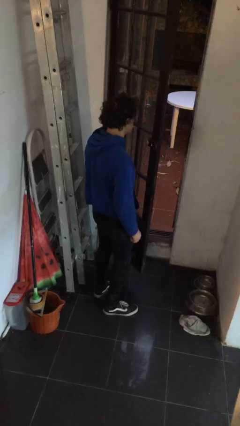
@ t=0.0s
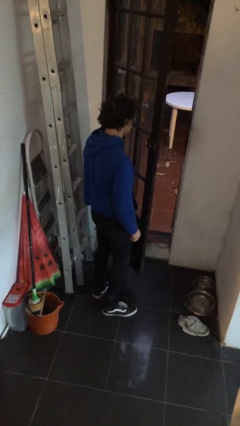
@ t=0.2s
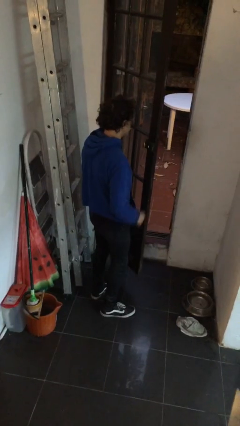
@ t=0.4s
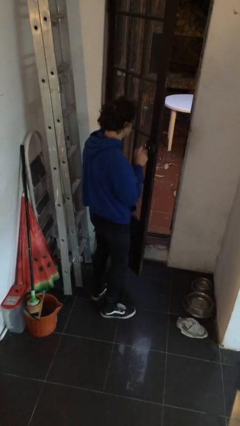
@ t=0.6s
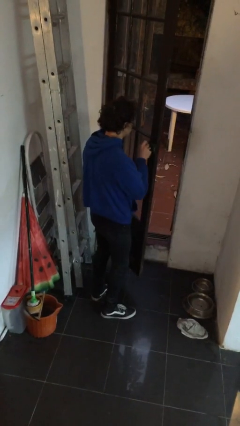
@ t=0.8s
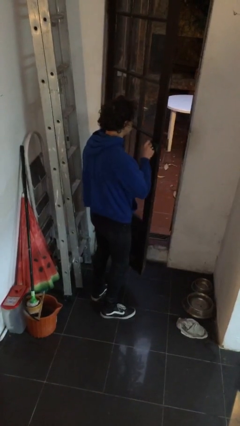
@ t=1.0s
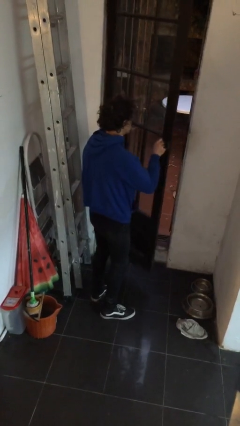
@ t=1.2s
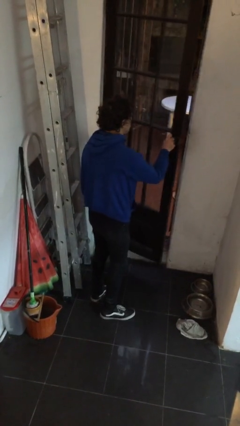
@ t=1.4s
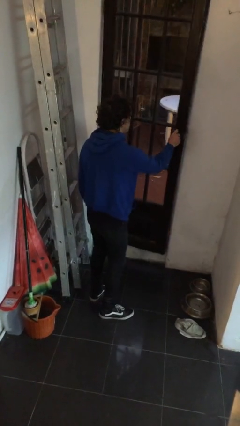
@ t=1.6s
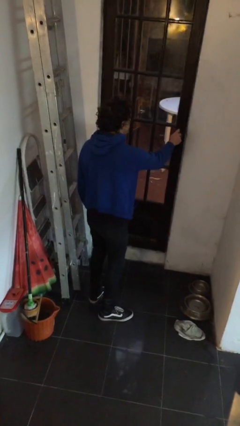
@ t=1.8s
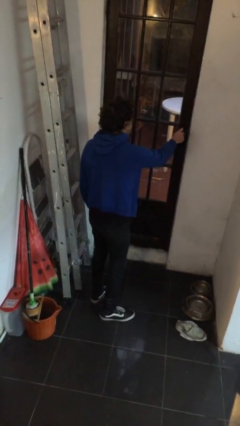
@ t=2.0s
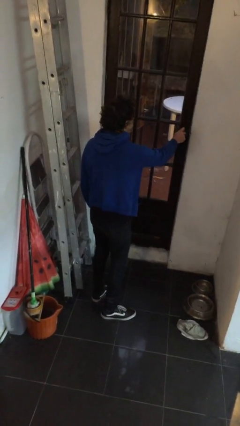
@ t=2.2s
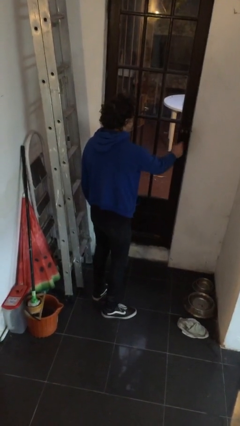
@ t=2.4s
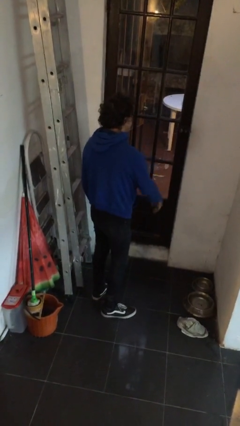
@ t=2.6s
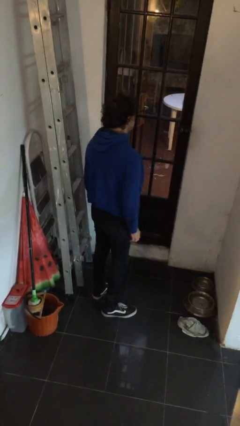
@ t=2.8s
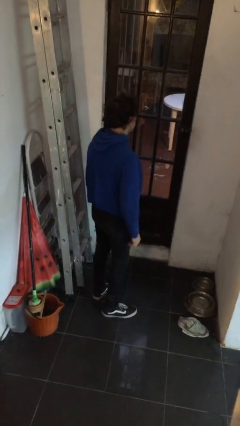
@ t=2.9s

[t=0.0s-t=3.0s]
person closes facility door

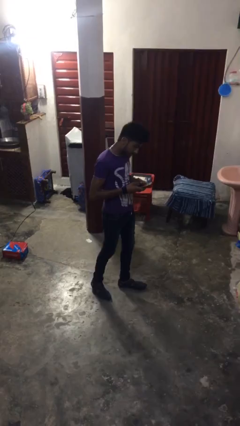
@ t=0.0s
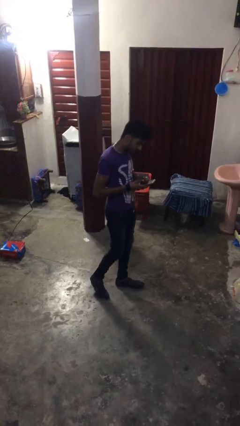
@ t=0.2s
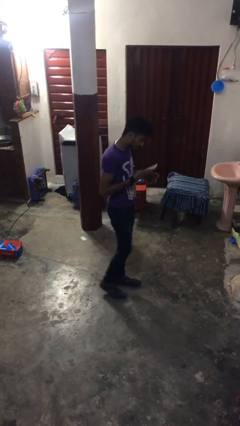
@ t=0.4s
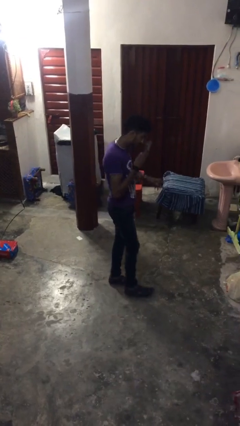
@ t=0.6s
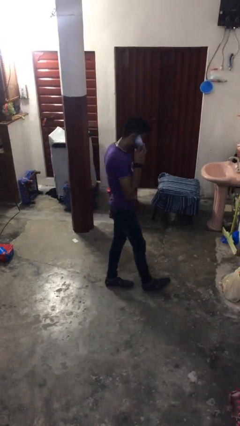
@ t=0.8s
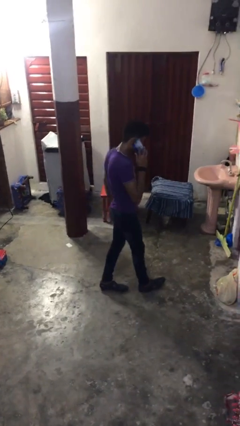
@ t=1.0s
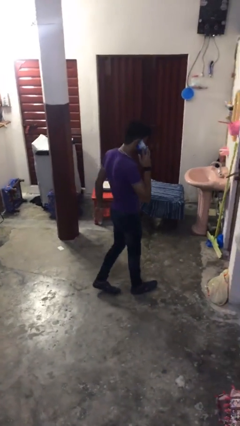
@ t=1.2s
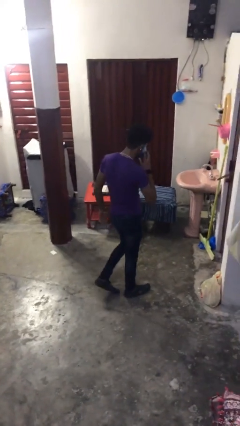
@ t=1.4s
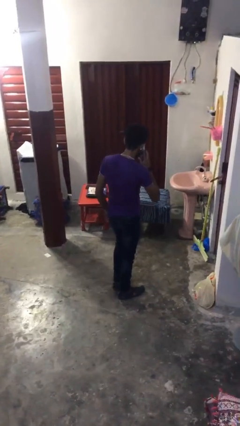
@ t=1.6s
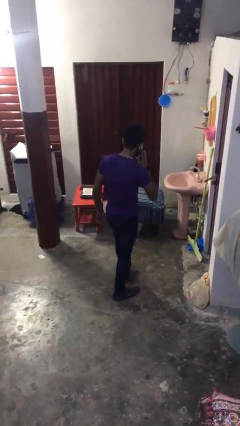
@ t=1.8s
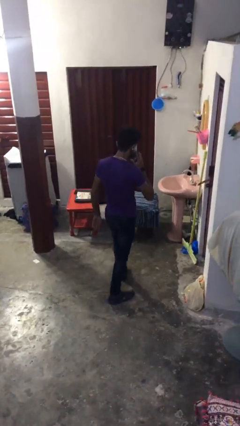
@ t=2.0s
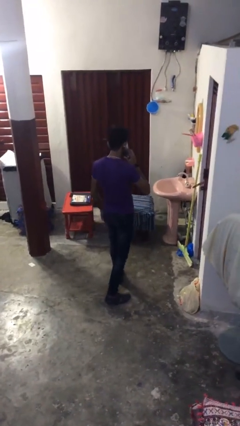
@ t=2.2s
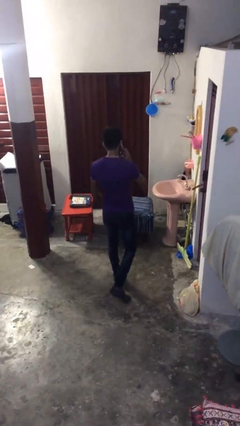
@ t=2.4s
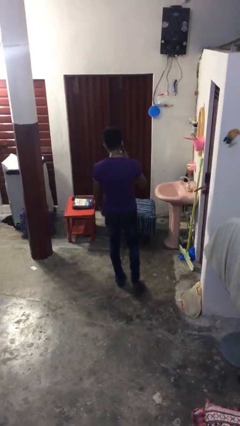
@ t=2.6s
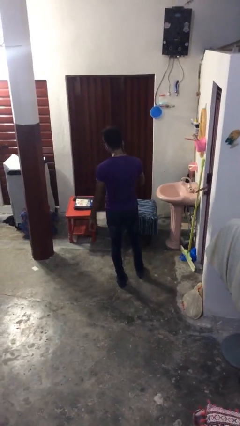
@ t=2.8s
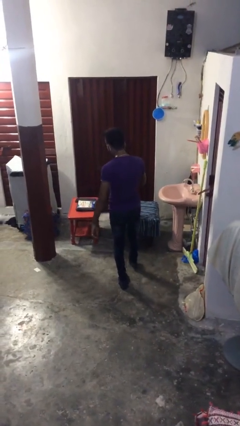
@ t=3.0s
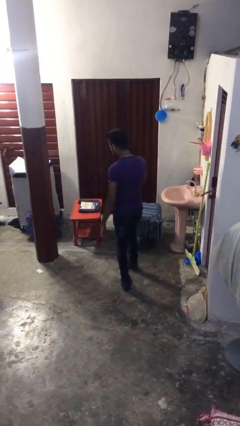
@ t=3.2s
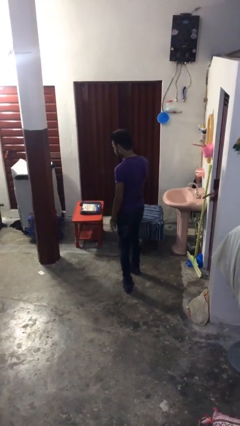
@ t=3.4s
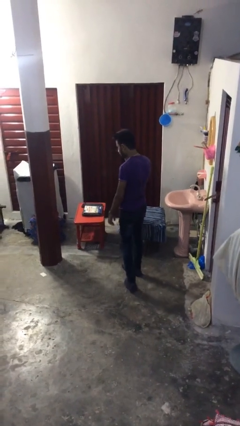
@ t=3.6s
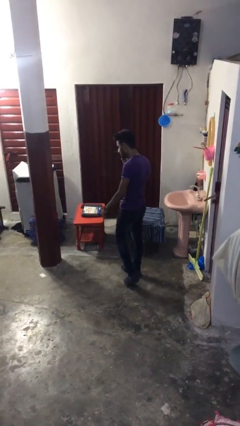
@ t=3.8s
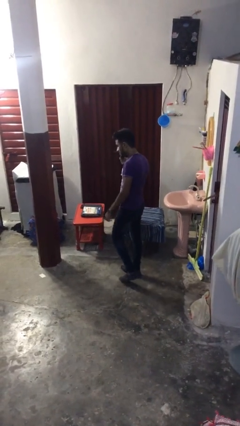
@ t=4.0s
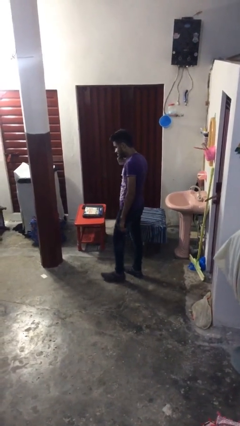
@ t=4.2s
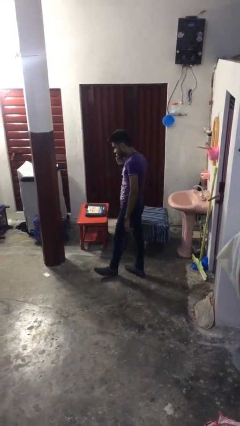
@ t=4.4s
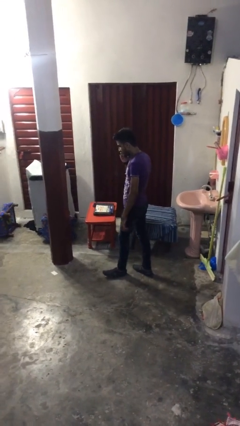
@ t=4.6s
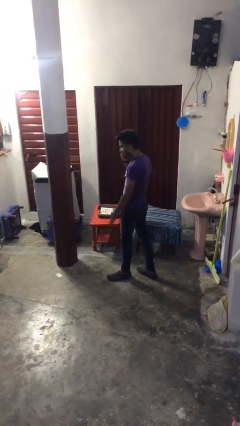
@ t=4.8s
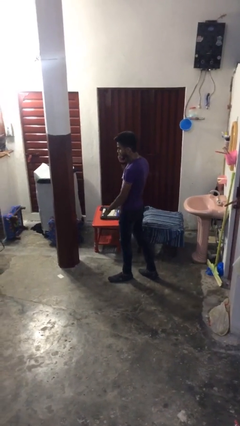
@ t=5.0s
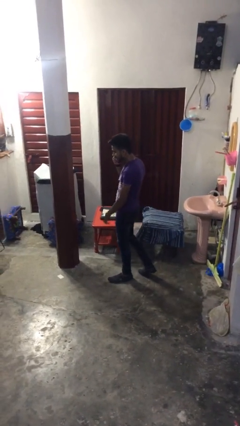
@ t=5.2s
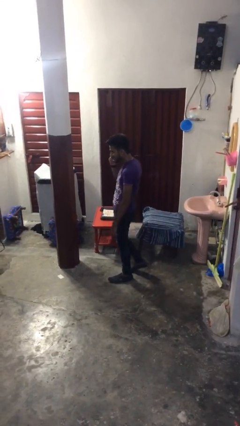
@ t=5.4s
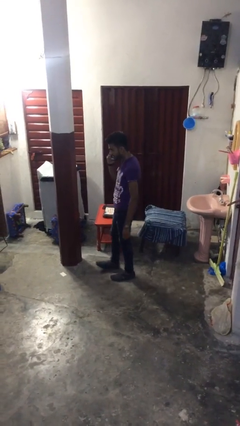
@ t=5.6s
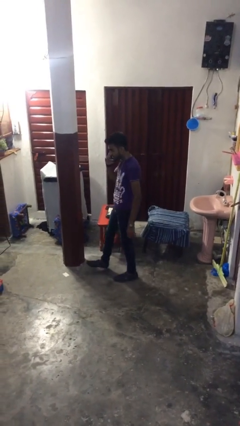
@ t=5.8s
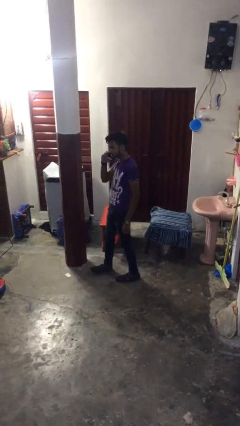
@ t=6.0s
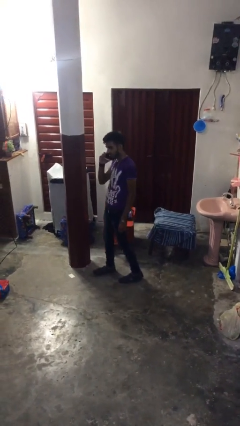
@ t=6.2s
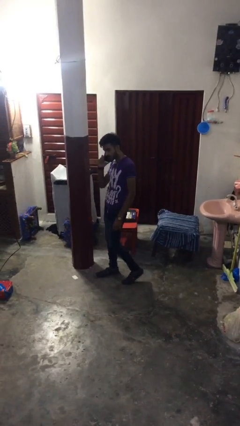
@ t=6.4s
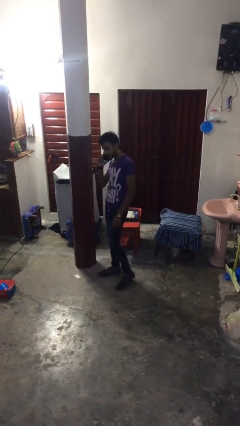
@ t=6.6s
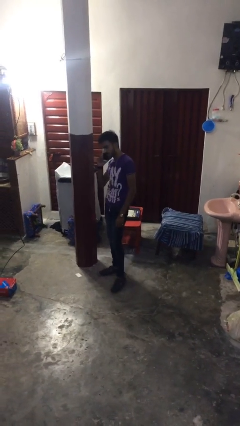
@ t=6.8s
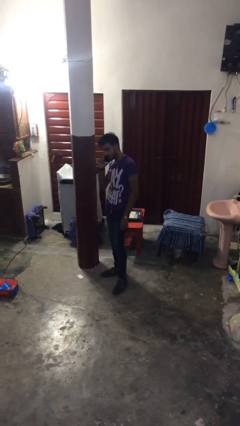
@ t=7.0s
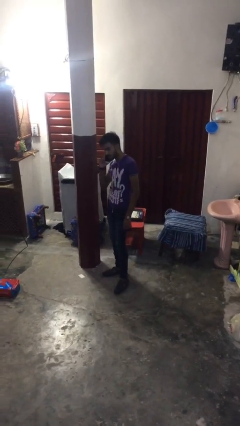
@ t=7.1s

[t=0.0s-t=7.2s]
person talks on phone

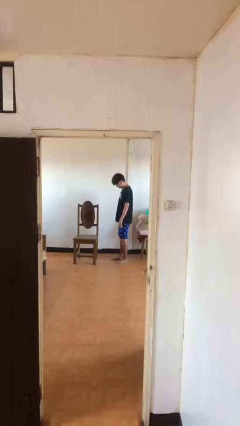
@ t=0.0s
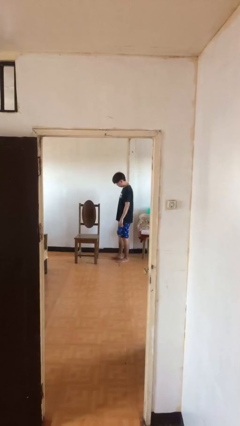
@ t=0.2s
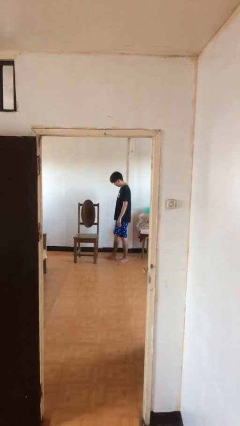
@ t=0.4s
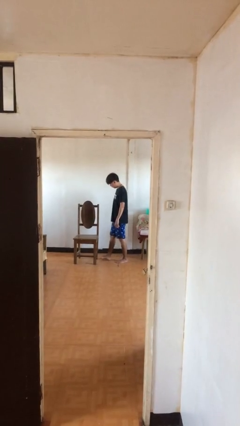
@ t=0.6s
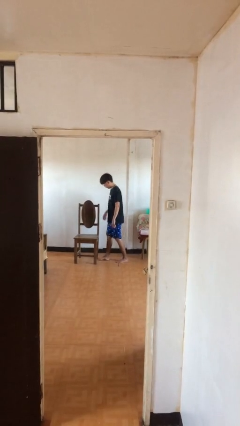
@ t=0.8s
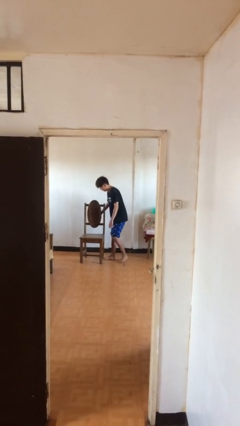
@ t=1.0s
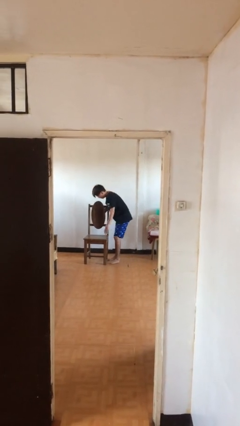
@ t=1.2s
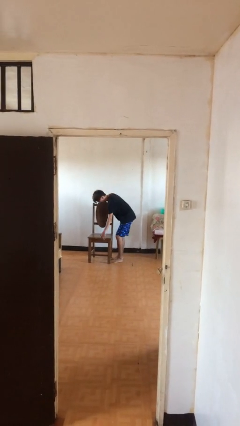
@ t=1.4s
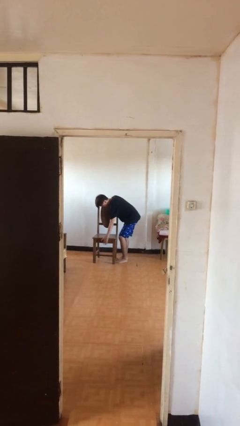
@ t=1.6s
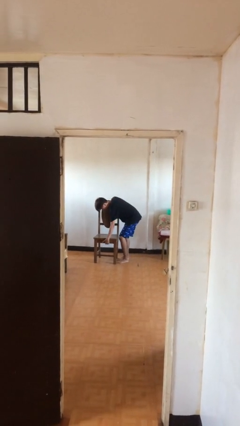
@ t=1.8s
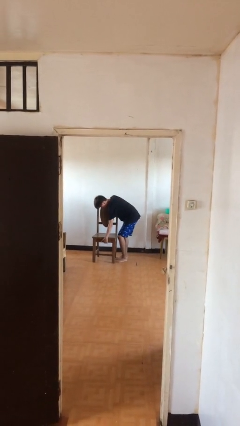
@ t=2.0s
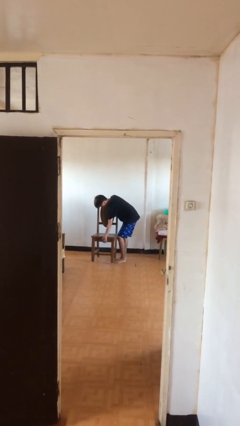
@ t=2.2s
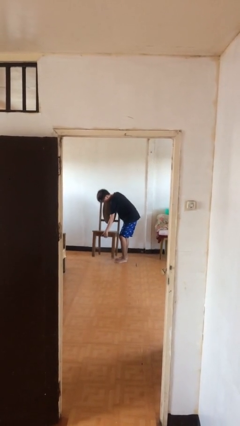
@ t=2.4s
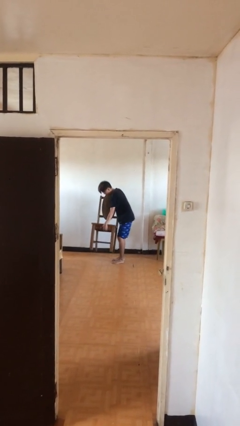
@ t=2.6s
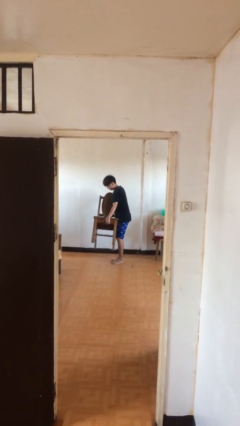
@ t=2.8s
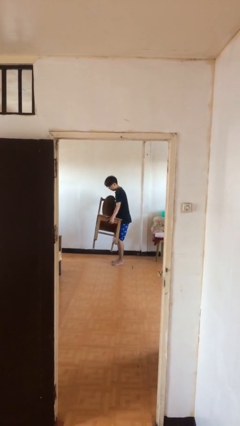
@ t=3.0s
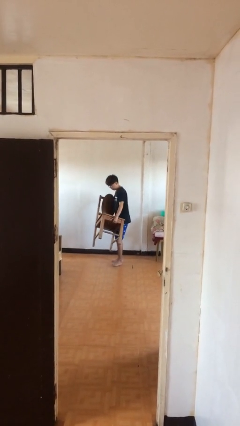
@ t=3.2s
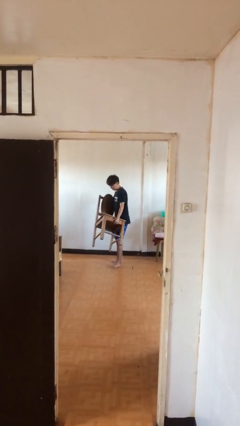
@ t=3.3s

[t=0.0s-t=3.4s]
person picks up object from floor

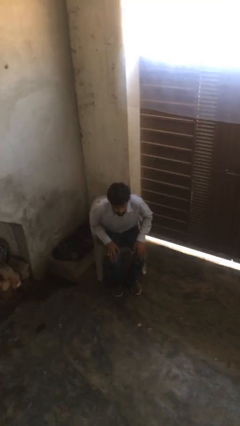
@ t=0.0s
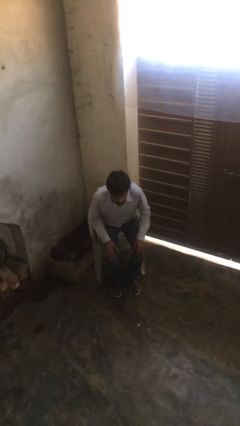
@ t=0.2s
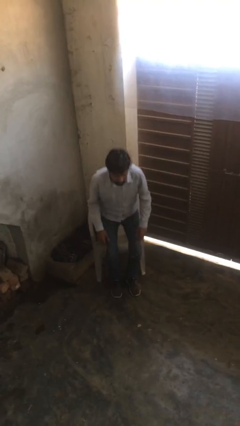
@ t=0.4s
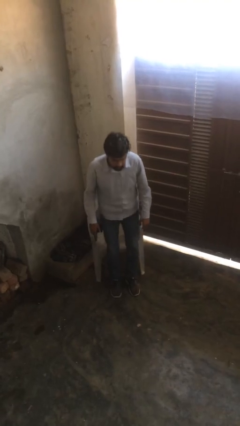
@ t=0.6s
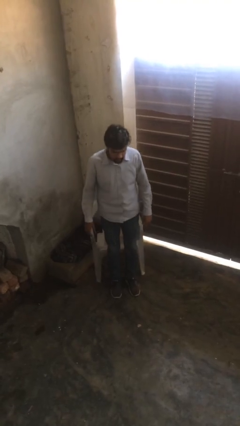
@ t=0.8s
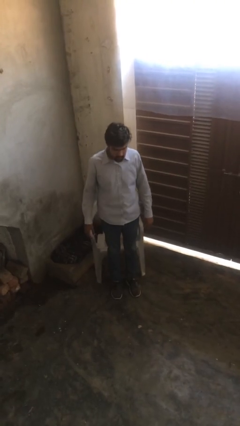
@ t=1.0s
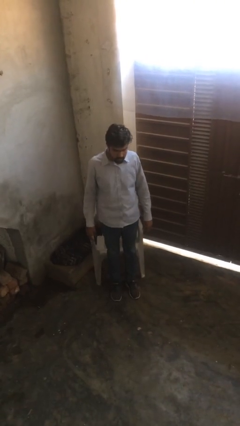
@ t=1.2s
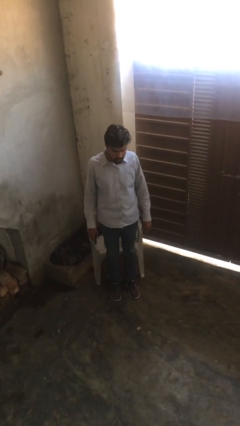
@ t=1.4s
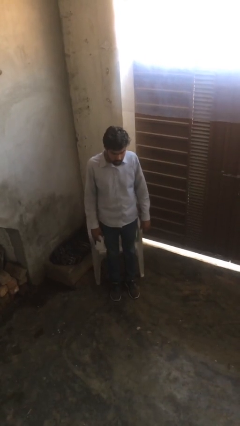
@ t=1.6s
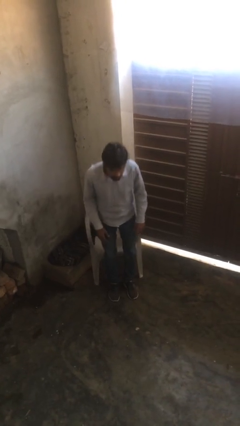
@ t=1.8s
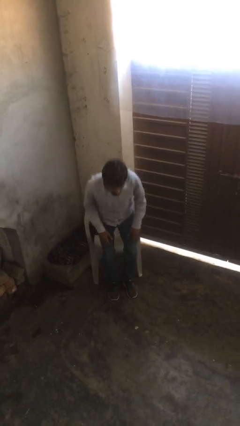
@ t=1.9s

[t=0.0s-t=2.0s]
person stands up

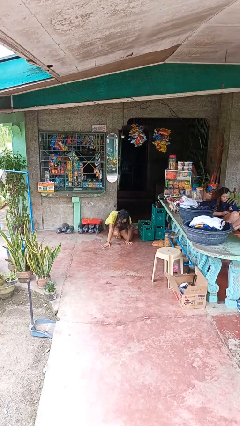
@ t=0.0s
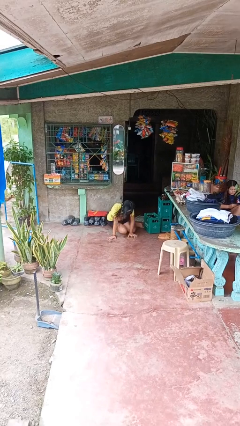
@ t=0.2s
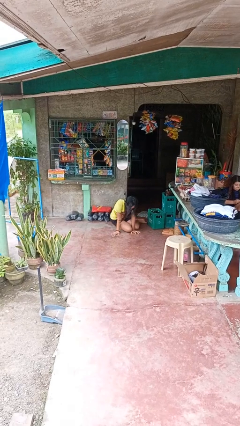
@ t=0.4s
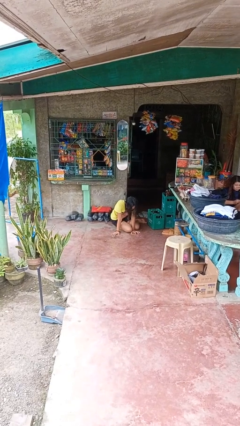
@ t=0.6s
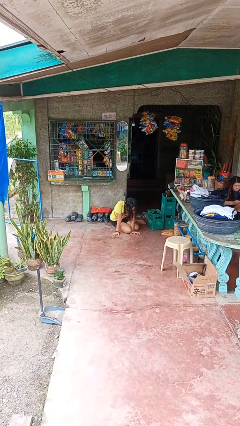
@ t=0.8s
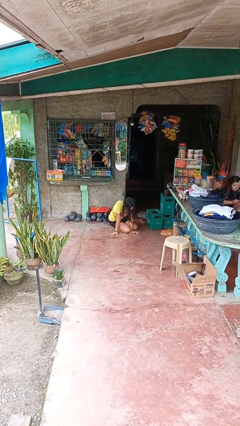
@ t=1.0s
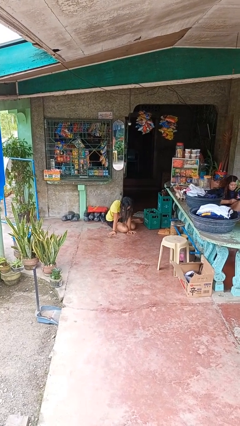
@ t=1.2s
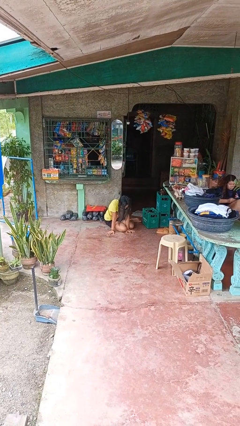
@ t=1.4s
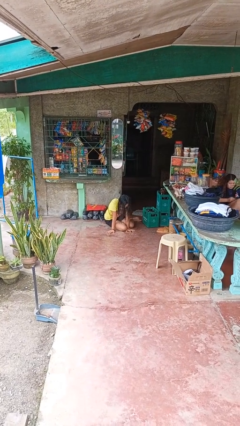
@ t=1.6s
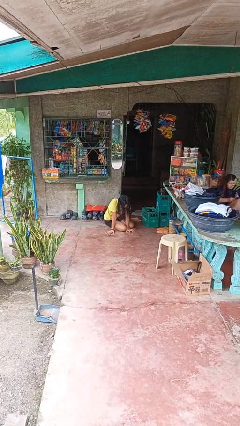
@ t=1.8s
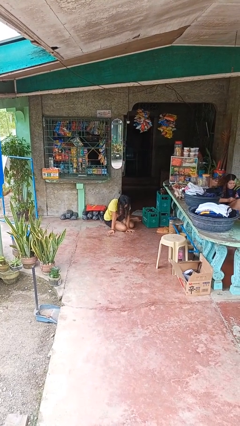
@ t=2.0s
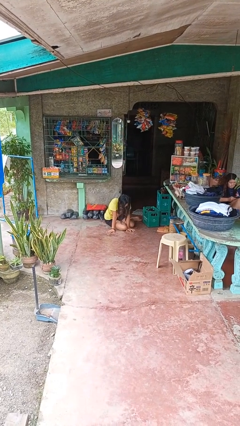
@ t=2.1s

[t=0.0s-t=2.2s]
person lies down on floor
